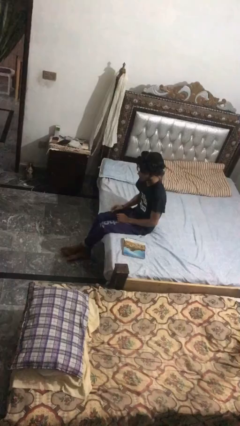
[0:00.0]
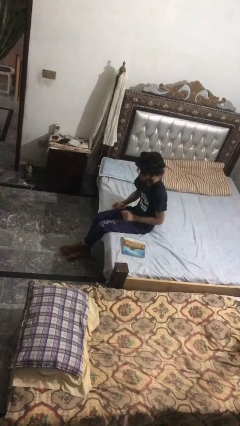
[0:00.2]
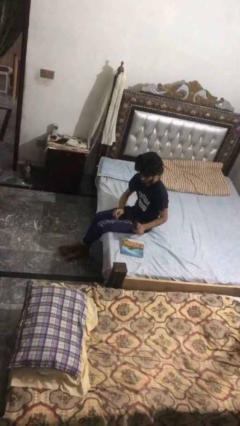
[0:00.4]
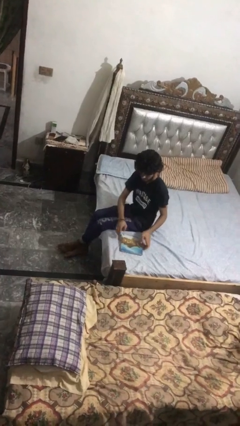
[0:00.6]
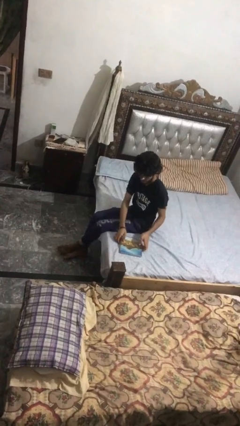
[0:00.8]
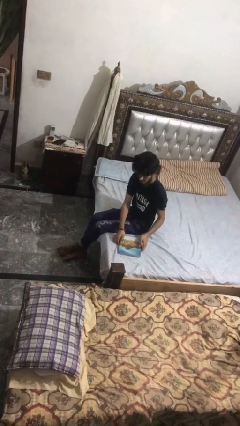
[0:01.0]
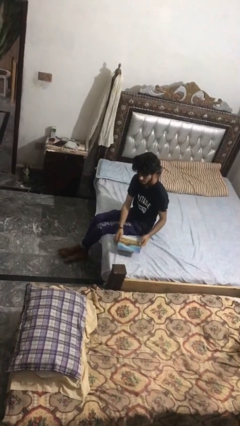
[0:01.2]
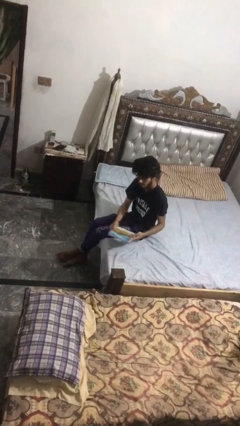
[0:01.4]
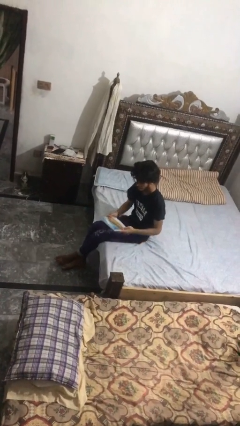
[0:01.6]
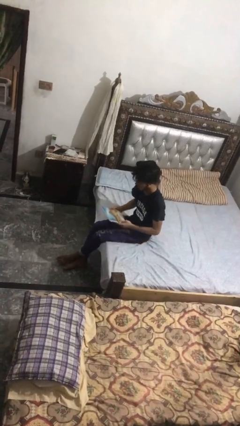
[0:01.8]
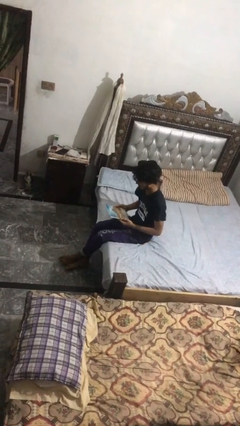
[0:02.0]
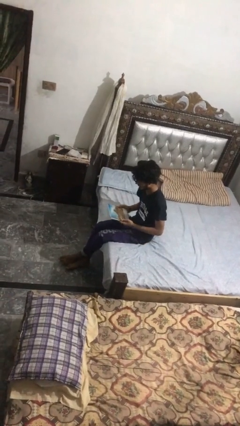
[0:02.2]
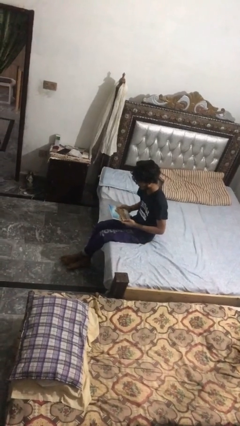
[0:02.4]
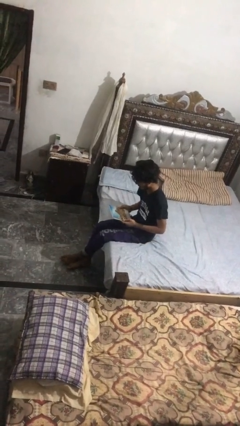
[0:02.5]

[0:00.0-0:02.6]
person picks up object from bed

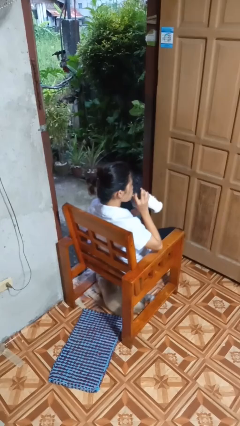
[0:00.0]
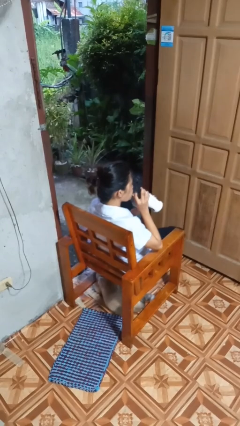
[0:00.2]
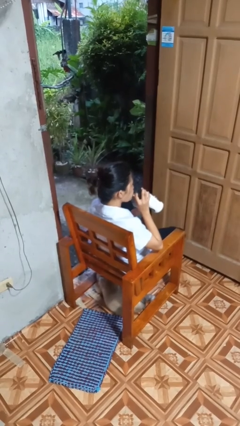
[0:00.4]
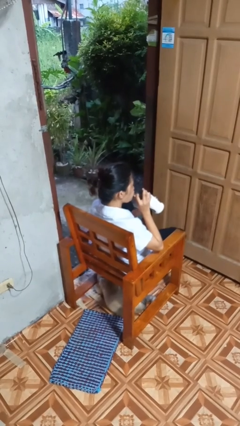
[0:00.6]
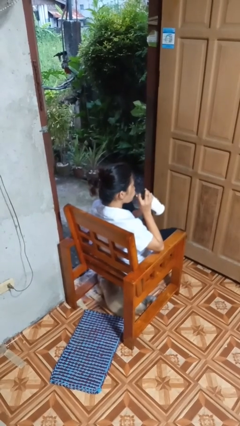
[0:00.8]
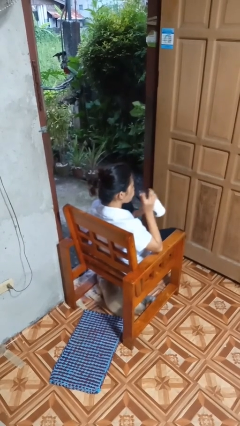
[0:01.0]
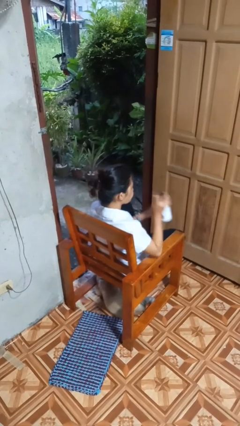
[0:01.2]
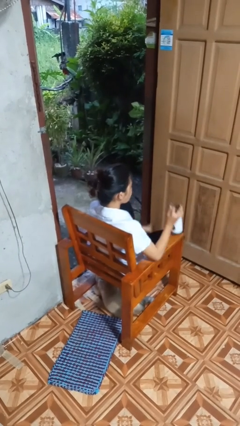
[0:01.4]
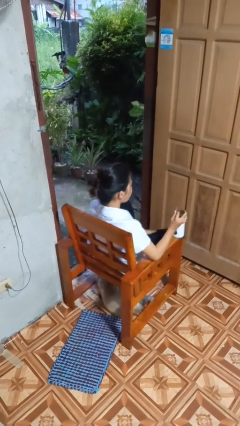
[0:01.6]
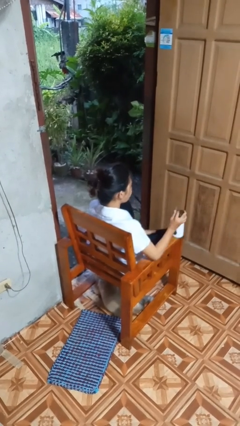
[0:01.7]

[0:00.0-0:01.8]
person drinks from straw

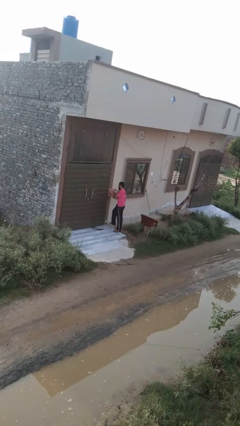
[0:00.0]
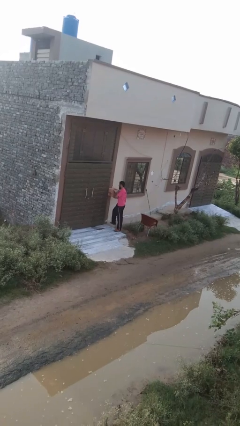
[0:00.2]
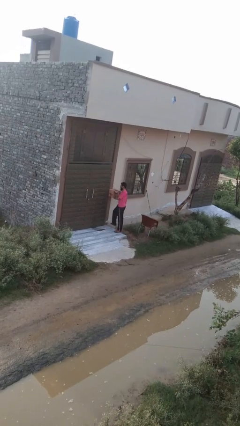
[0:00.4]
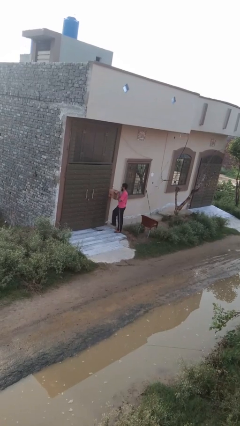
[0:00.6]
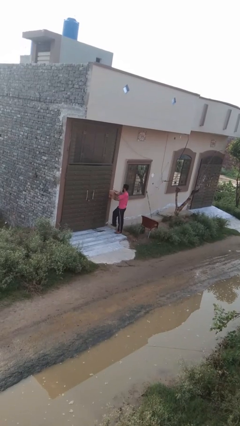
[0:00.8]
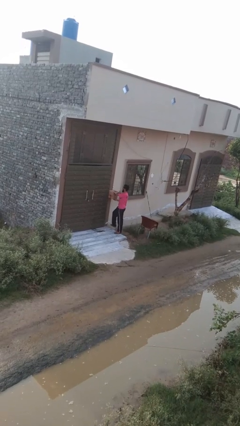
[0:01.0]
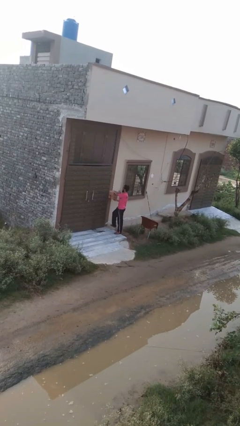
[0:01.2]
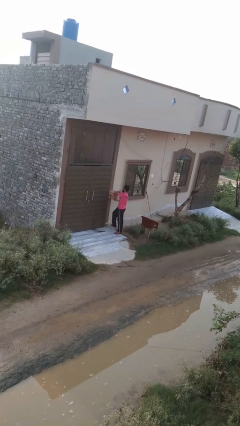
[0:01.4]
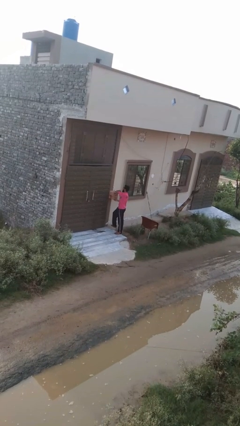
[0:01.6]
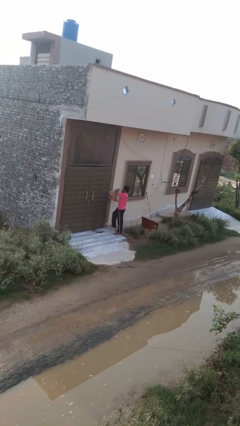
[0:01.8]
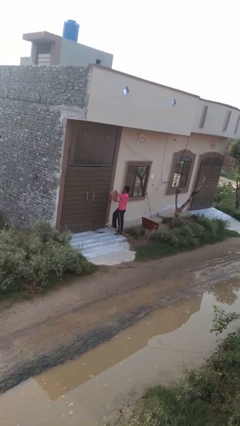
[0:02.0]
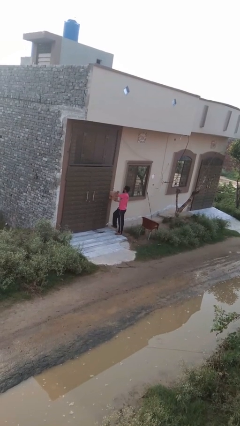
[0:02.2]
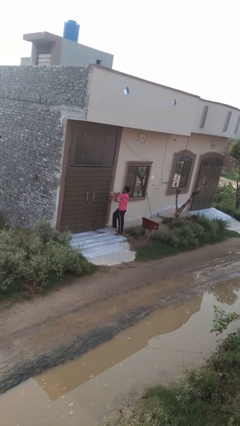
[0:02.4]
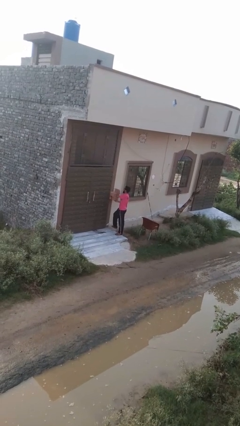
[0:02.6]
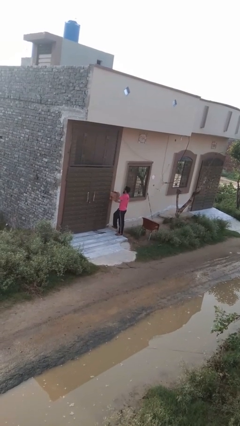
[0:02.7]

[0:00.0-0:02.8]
person closes mailbox

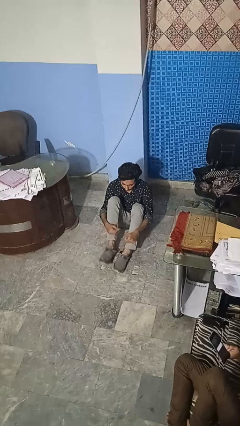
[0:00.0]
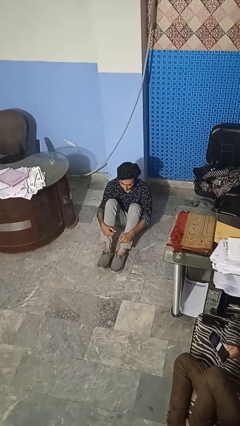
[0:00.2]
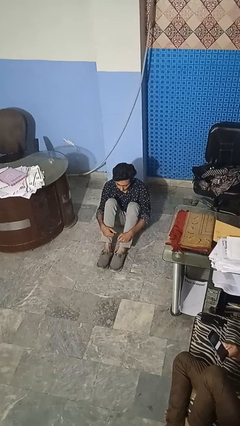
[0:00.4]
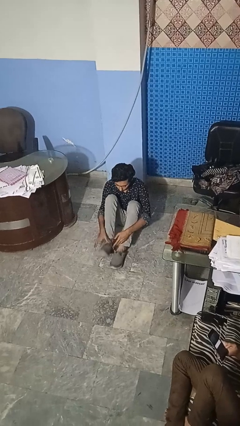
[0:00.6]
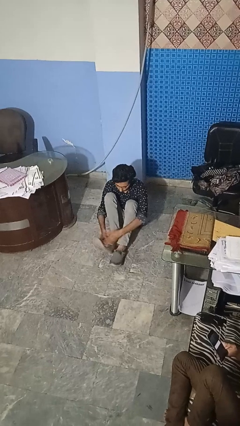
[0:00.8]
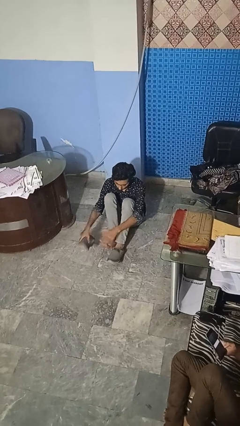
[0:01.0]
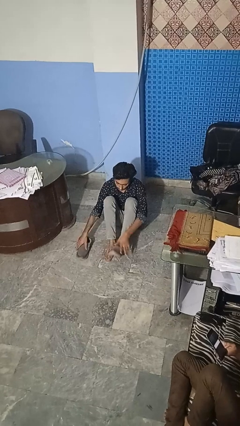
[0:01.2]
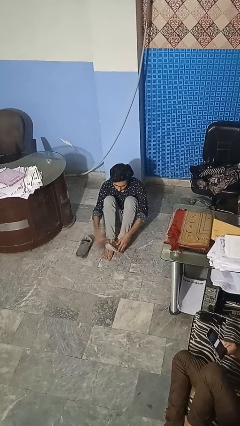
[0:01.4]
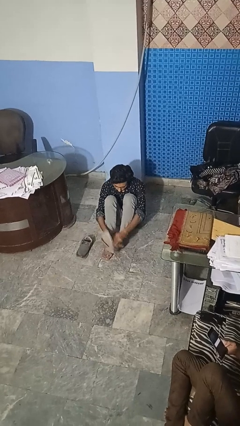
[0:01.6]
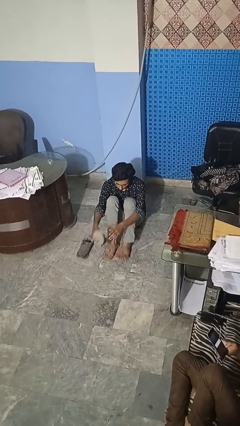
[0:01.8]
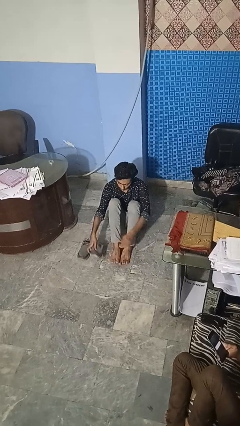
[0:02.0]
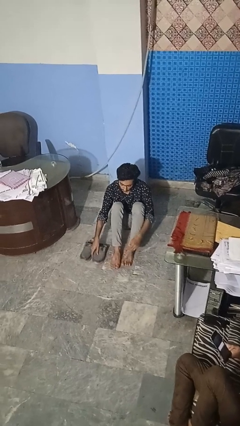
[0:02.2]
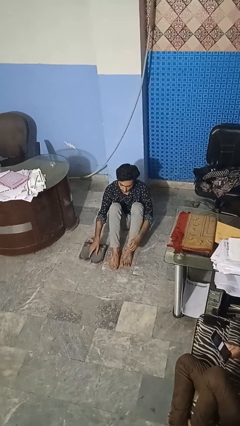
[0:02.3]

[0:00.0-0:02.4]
person takes off shoes

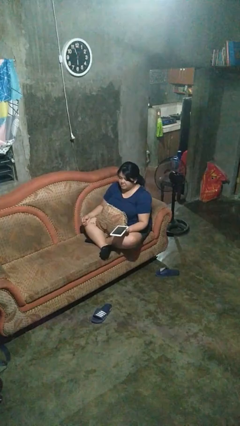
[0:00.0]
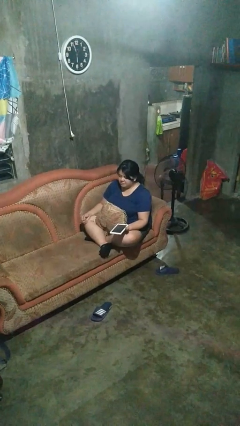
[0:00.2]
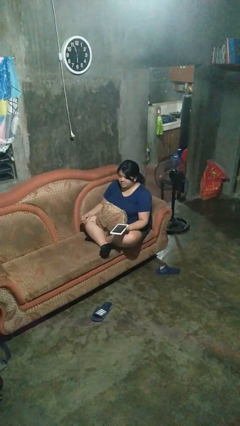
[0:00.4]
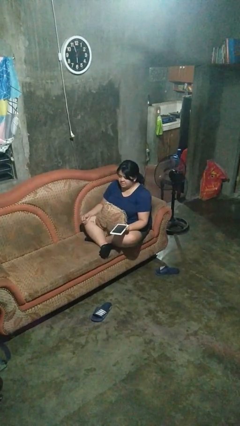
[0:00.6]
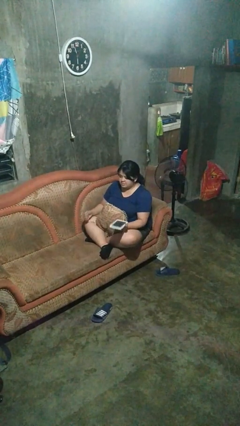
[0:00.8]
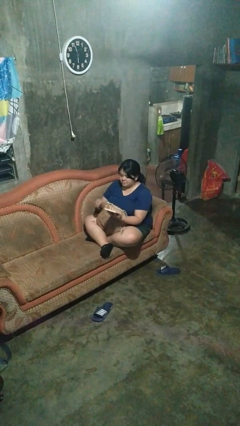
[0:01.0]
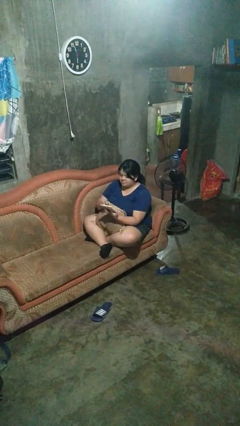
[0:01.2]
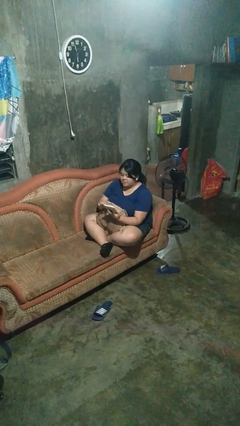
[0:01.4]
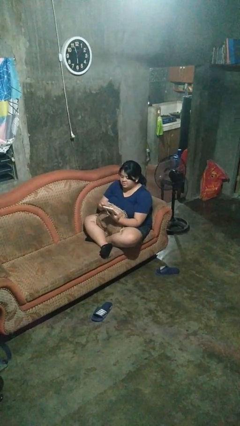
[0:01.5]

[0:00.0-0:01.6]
person interacts with tablet

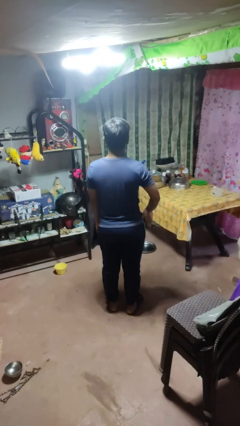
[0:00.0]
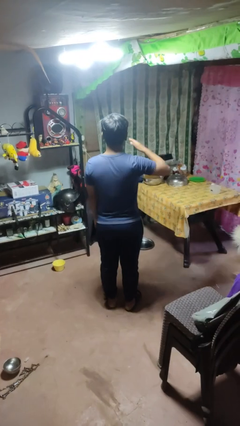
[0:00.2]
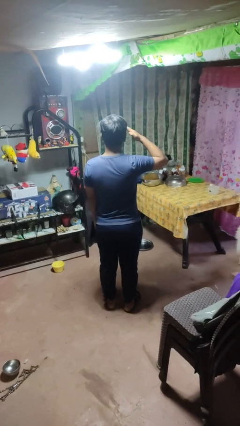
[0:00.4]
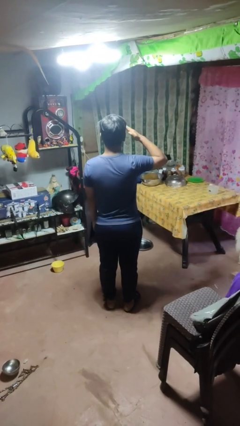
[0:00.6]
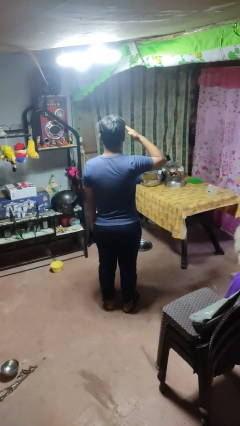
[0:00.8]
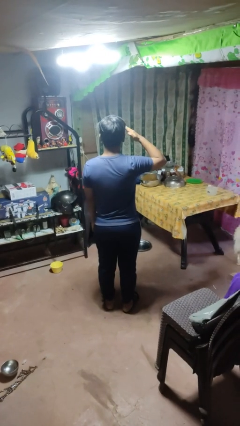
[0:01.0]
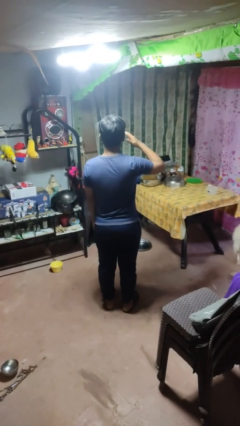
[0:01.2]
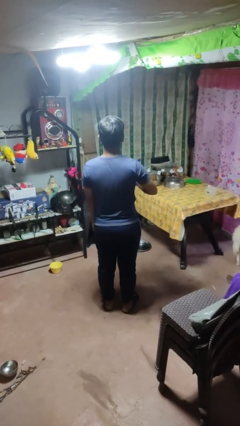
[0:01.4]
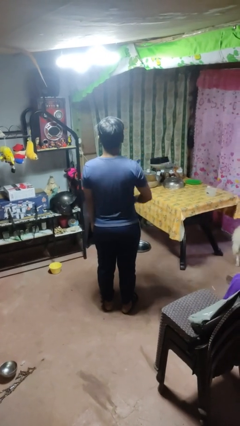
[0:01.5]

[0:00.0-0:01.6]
person salutes

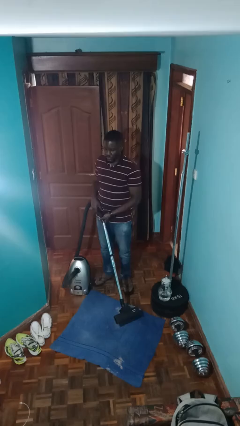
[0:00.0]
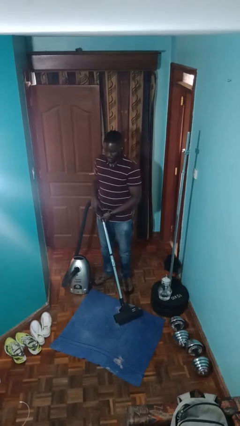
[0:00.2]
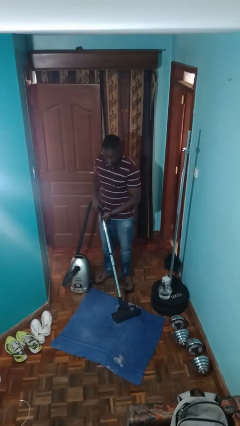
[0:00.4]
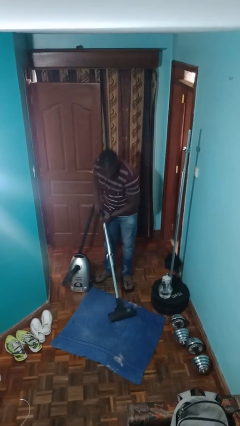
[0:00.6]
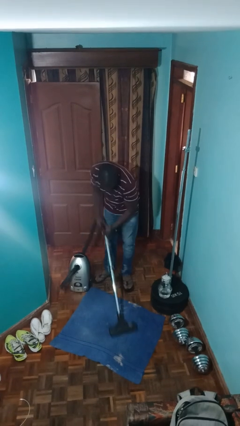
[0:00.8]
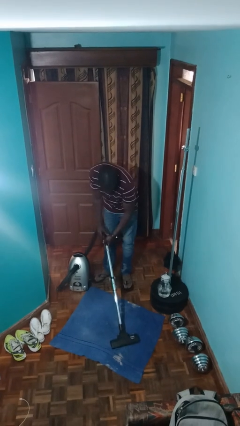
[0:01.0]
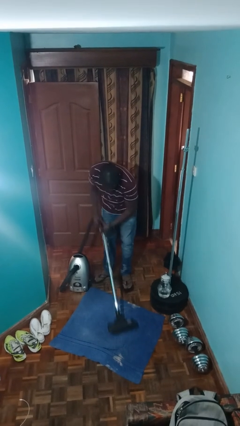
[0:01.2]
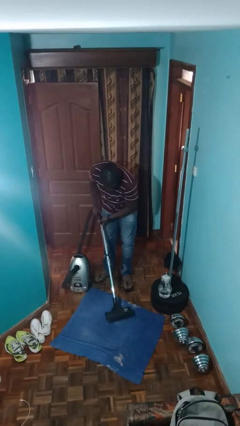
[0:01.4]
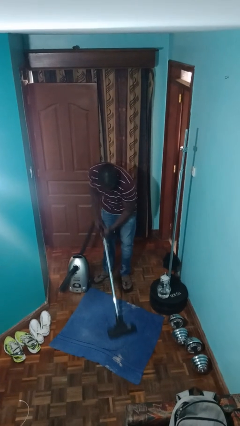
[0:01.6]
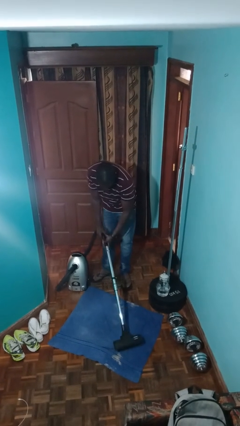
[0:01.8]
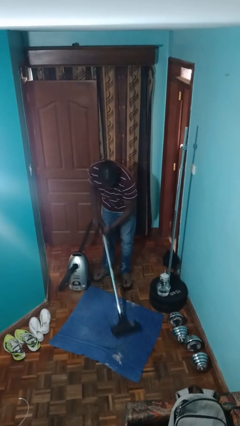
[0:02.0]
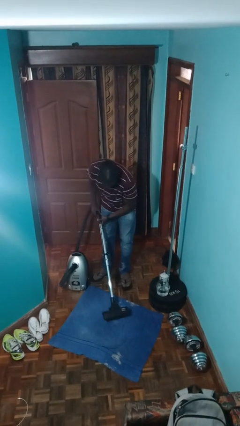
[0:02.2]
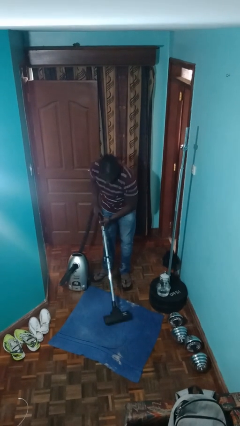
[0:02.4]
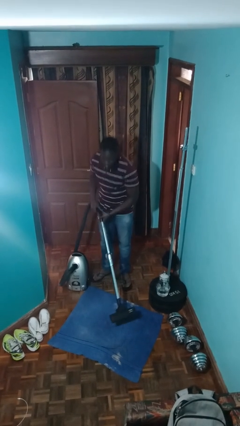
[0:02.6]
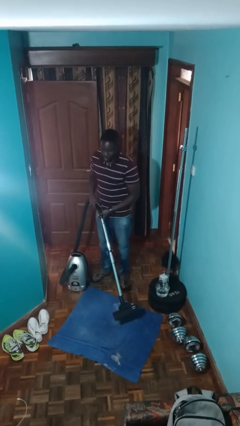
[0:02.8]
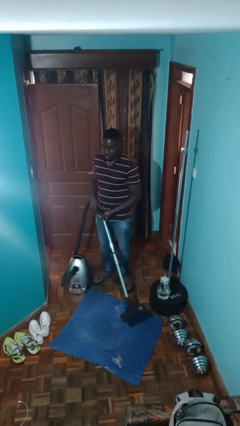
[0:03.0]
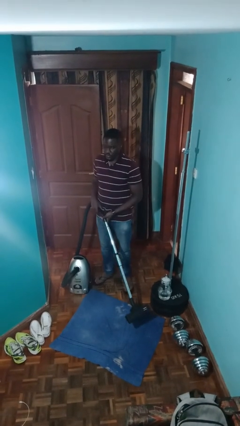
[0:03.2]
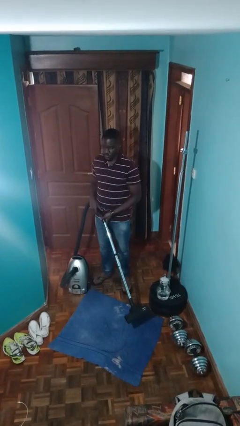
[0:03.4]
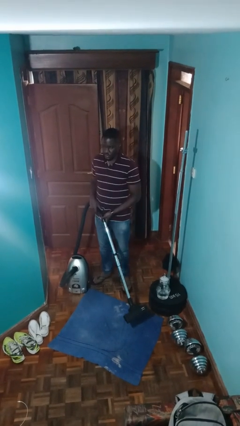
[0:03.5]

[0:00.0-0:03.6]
person vacuums carpet

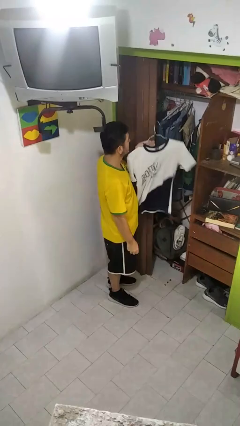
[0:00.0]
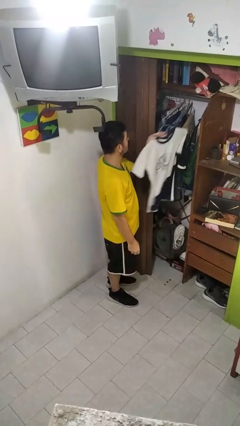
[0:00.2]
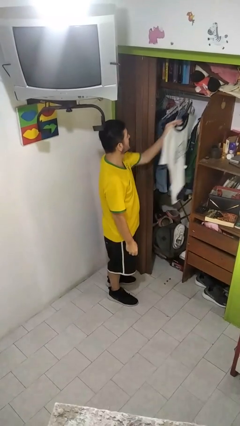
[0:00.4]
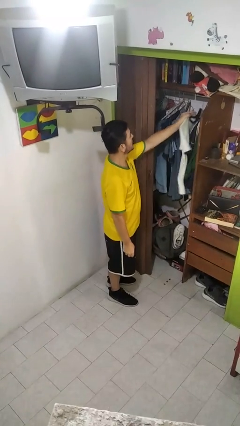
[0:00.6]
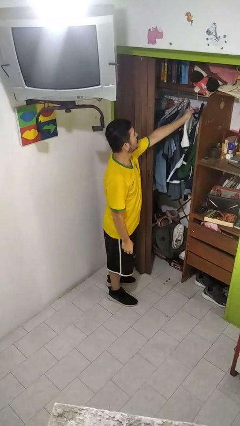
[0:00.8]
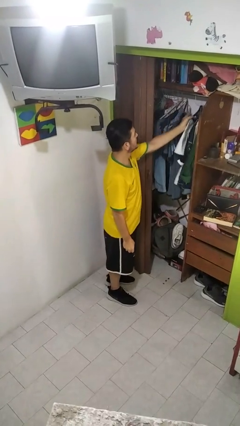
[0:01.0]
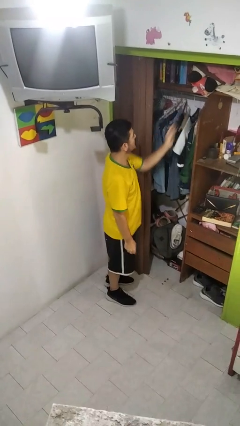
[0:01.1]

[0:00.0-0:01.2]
person puts clothes into closet
